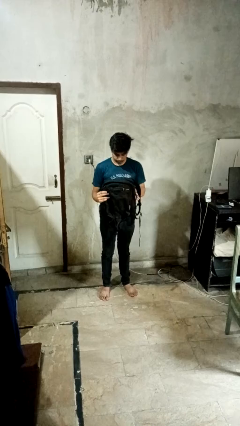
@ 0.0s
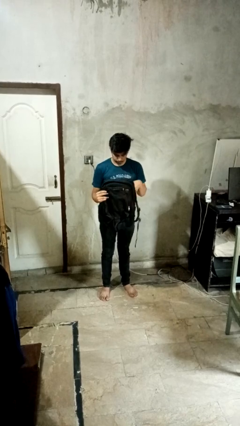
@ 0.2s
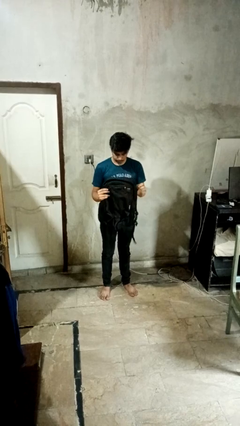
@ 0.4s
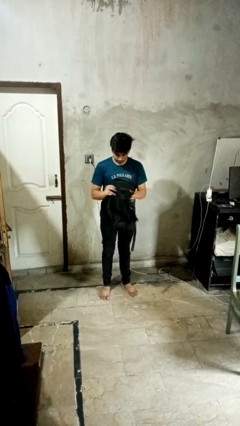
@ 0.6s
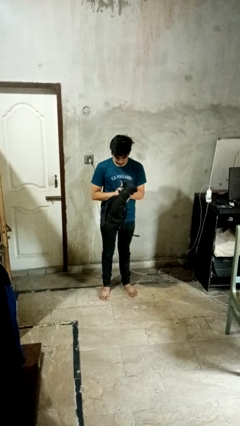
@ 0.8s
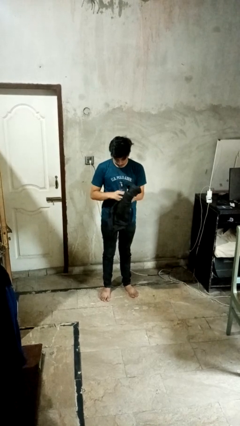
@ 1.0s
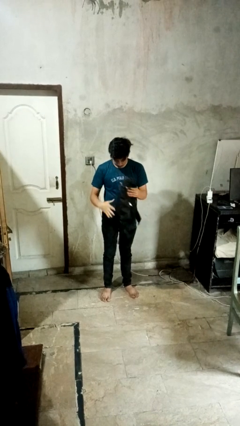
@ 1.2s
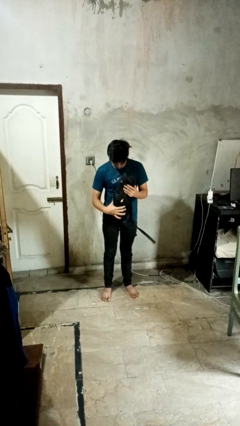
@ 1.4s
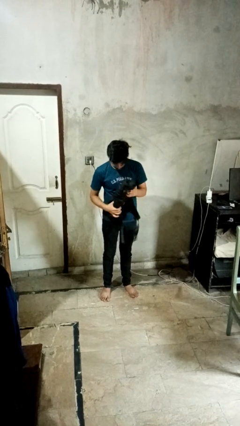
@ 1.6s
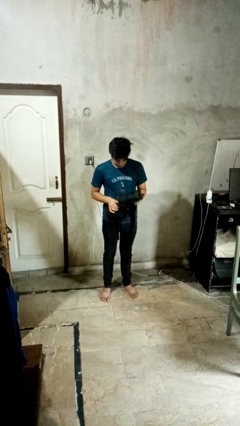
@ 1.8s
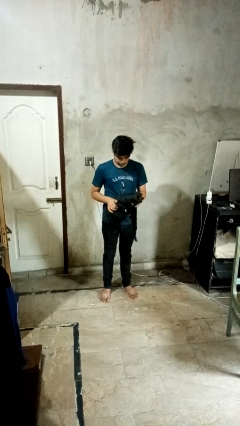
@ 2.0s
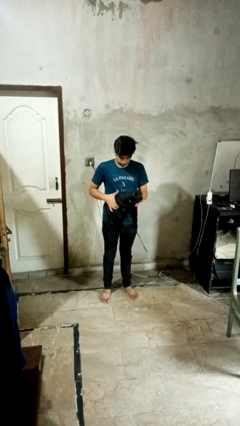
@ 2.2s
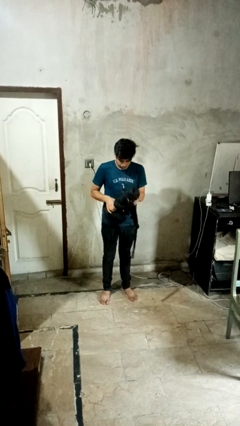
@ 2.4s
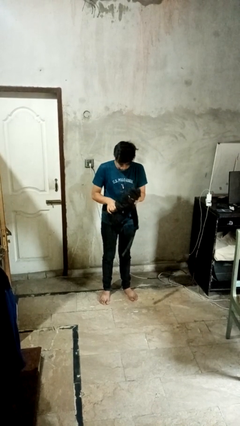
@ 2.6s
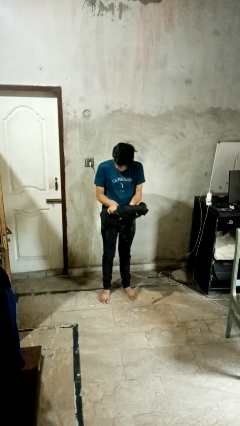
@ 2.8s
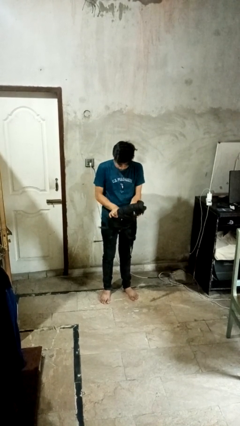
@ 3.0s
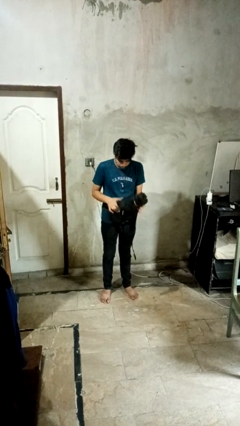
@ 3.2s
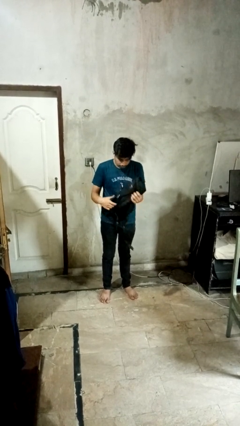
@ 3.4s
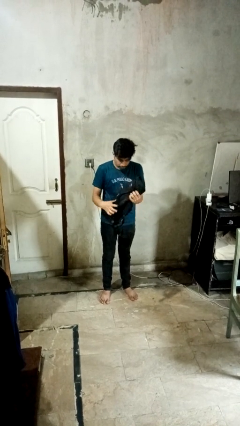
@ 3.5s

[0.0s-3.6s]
person squeezes object

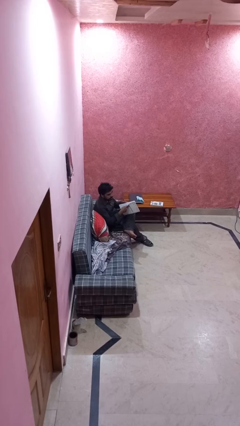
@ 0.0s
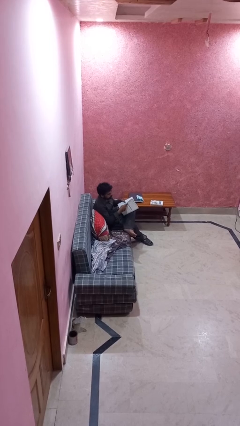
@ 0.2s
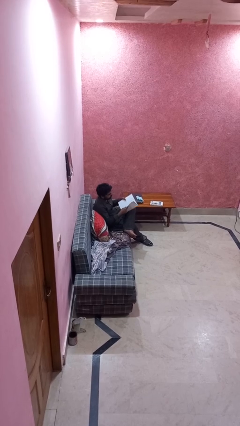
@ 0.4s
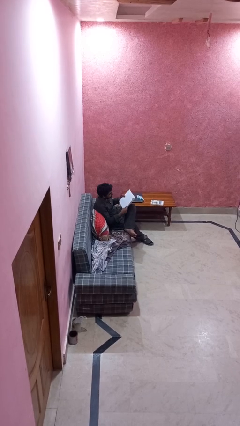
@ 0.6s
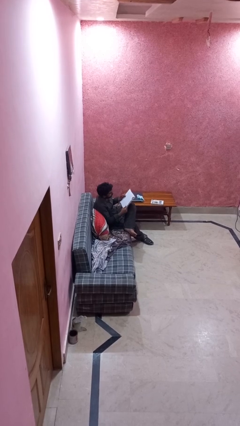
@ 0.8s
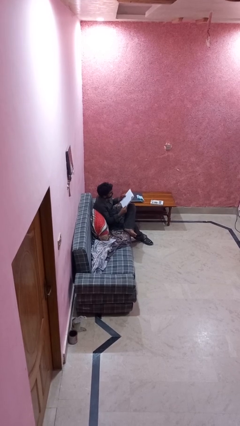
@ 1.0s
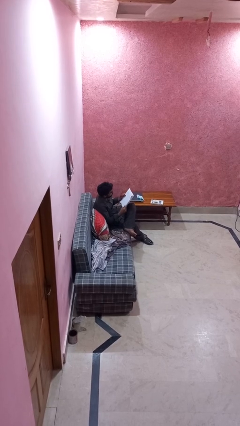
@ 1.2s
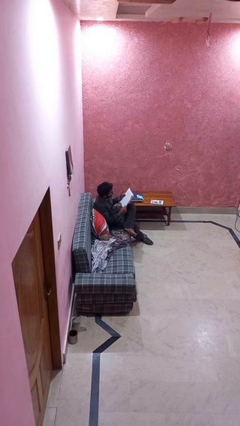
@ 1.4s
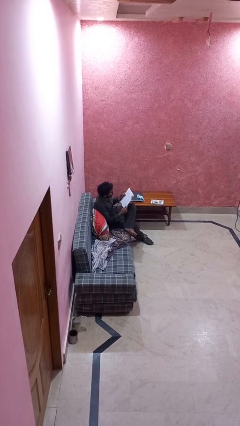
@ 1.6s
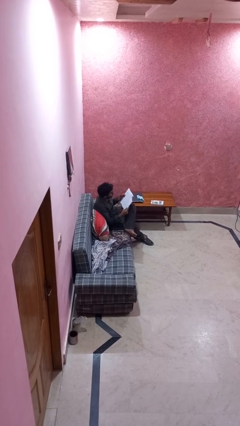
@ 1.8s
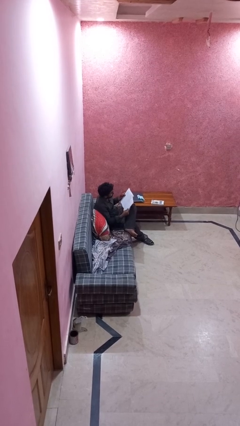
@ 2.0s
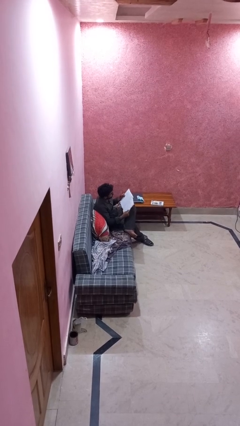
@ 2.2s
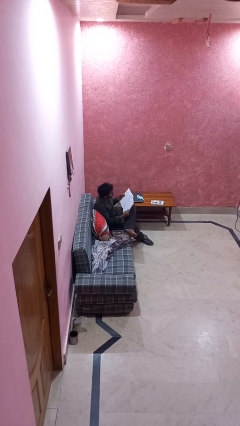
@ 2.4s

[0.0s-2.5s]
person reads magazine

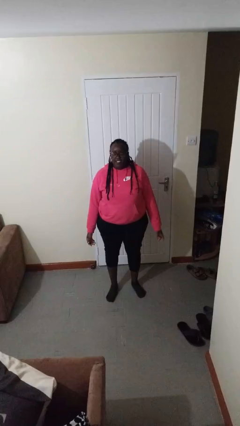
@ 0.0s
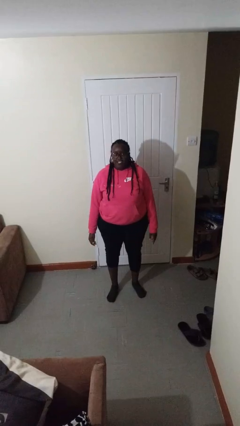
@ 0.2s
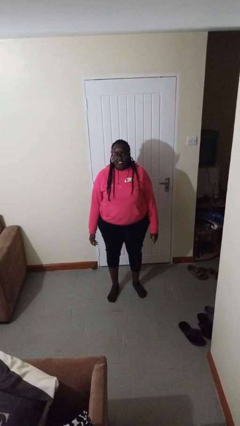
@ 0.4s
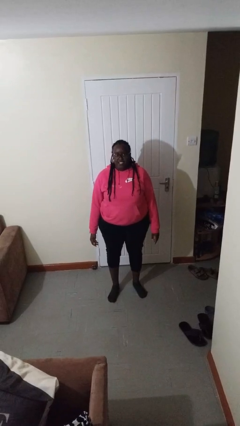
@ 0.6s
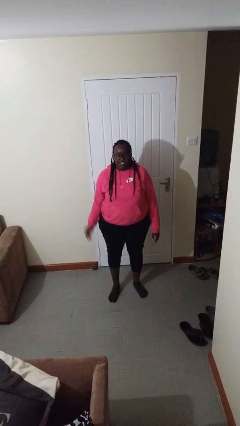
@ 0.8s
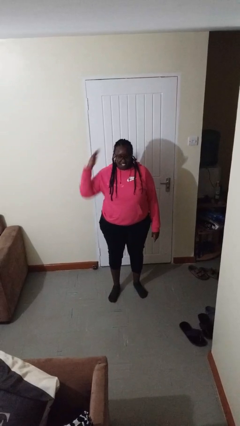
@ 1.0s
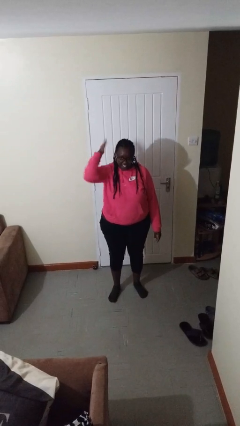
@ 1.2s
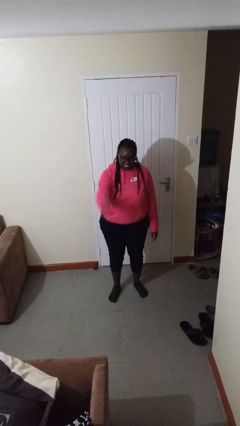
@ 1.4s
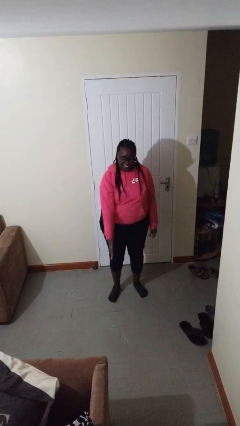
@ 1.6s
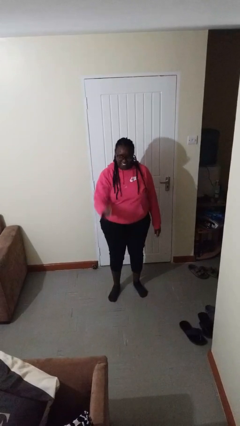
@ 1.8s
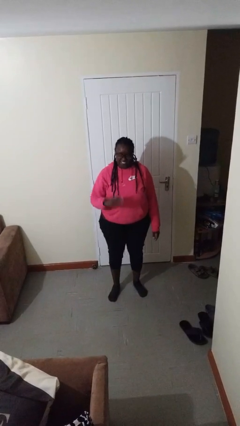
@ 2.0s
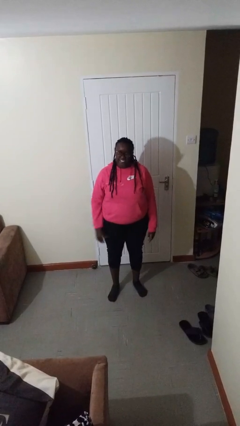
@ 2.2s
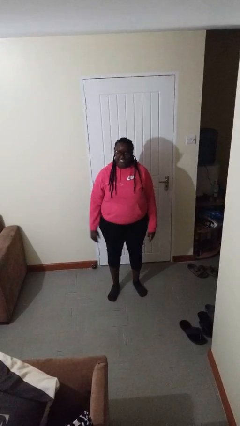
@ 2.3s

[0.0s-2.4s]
person karate chop

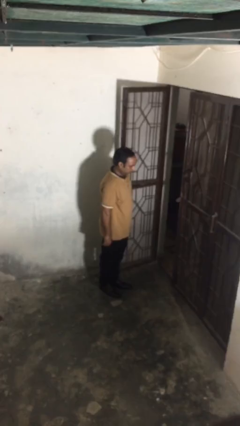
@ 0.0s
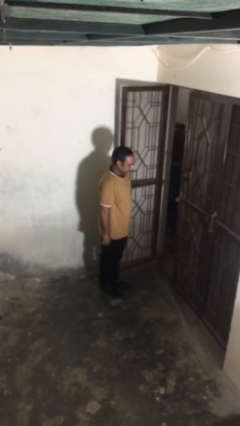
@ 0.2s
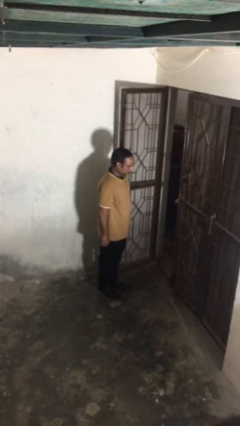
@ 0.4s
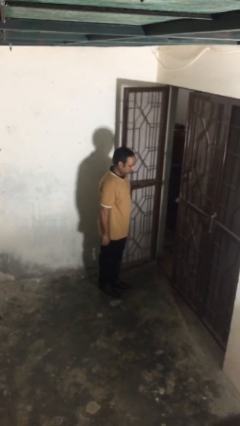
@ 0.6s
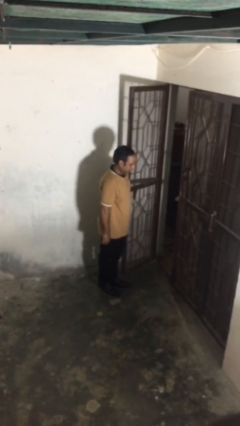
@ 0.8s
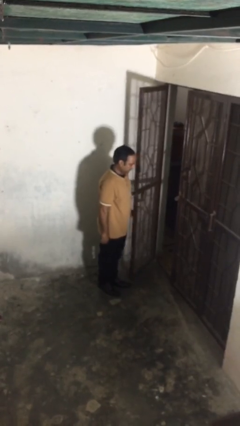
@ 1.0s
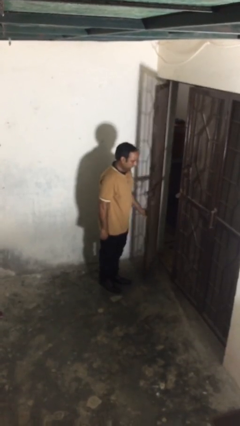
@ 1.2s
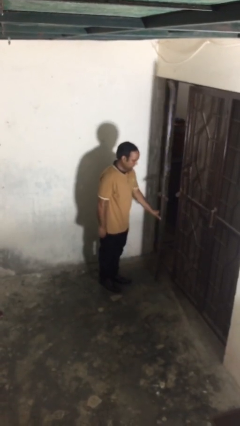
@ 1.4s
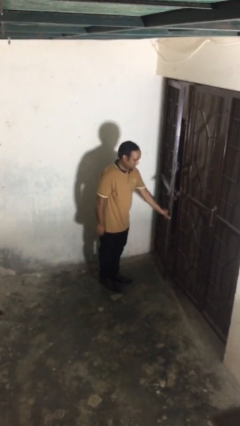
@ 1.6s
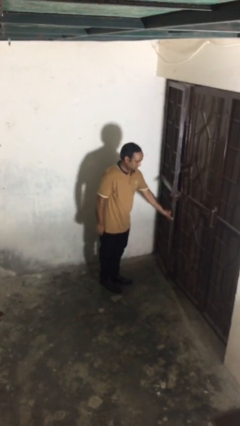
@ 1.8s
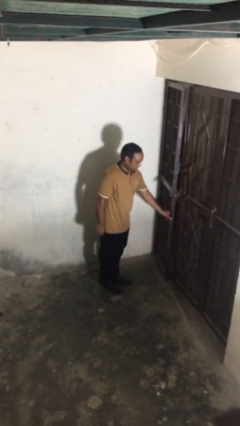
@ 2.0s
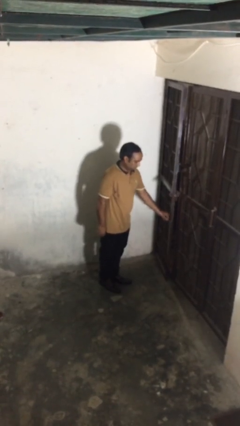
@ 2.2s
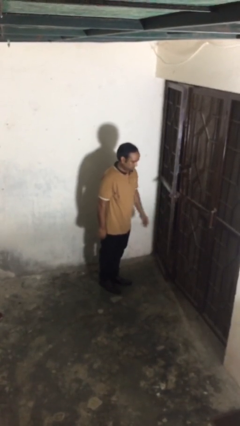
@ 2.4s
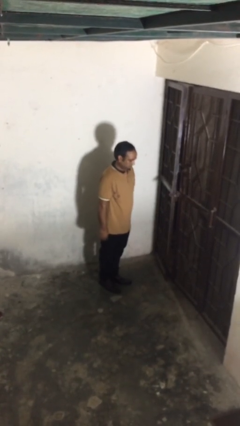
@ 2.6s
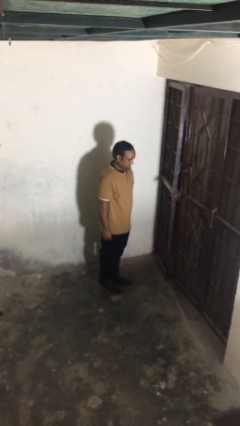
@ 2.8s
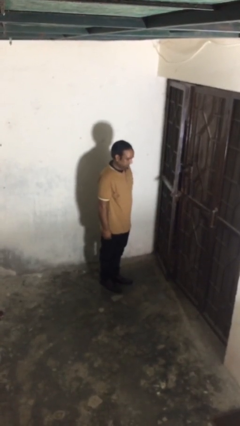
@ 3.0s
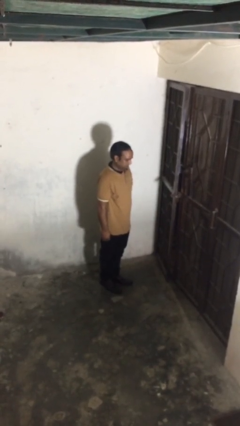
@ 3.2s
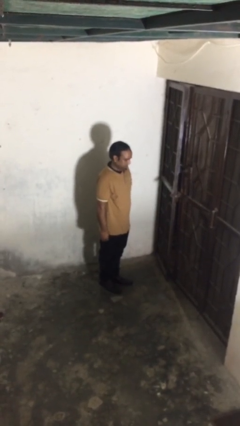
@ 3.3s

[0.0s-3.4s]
person closes facility door

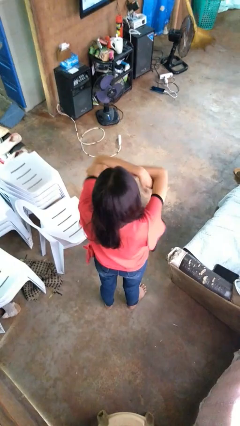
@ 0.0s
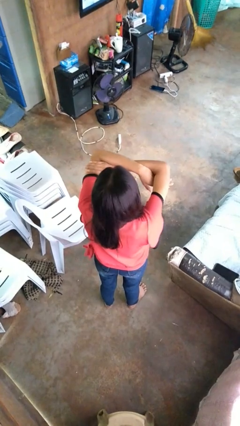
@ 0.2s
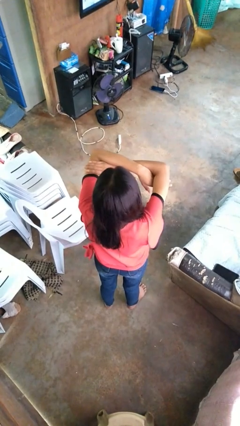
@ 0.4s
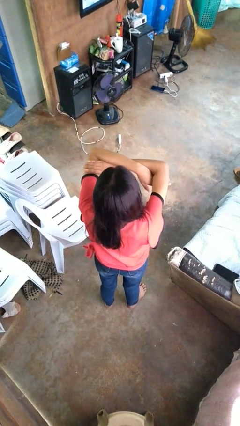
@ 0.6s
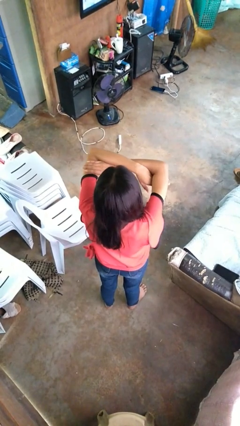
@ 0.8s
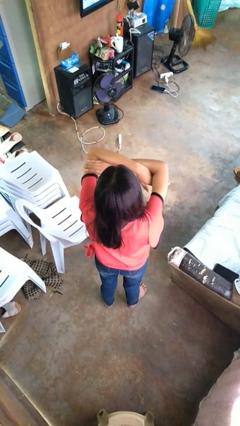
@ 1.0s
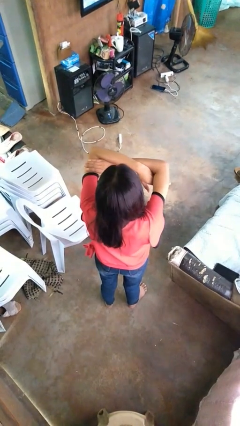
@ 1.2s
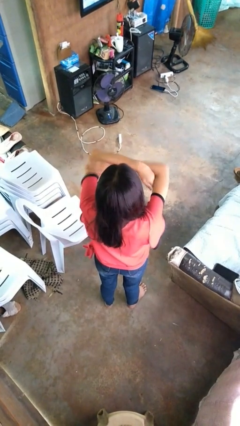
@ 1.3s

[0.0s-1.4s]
person gestures arms x

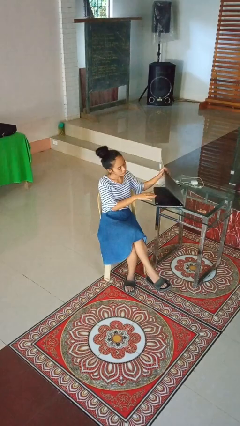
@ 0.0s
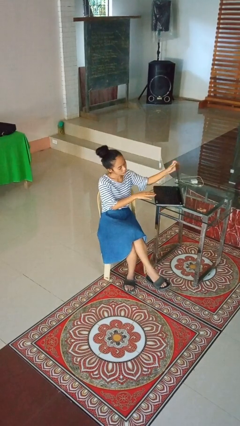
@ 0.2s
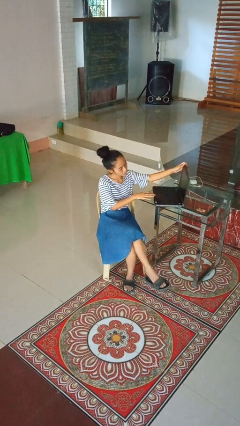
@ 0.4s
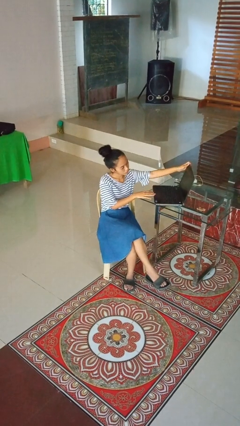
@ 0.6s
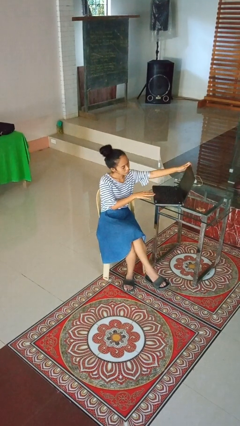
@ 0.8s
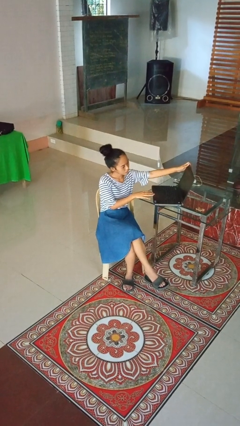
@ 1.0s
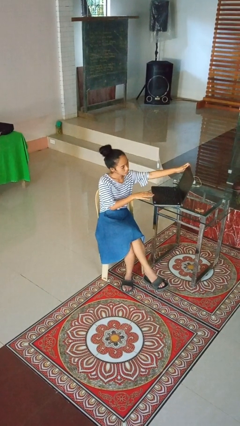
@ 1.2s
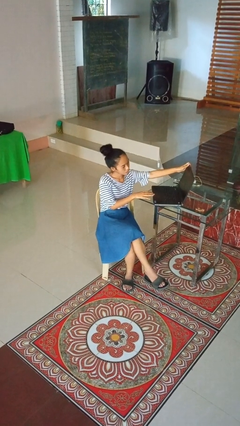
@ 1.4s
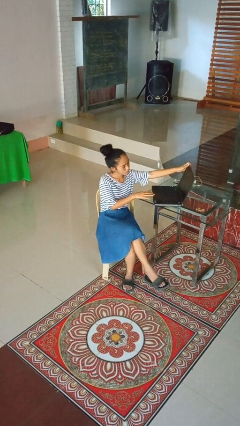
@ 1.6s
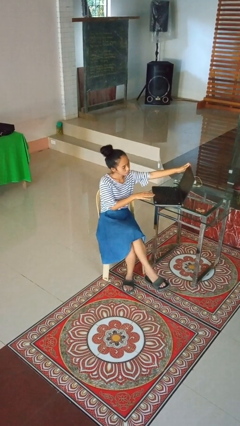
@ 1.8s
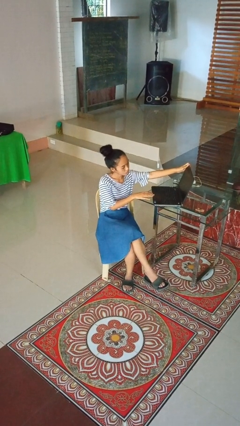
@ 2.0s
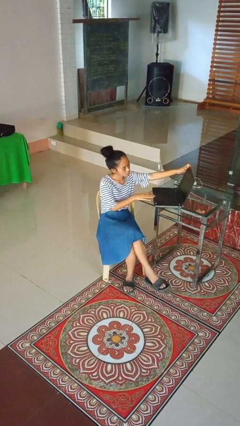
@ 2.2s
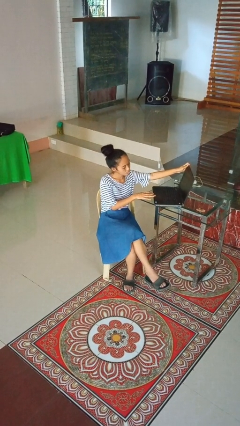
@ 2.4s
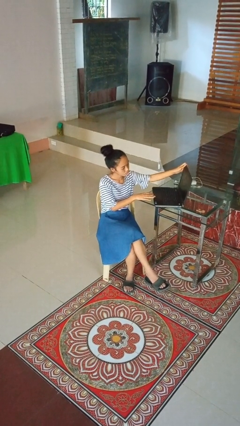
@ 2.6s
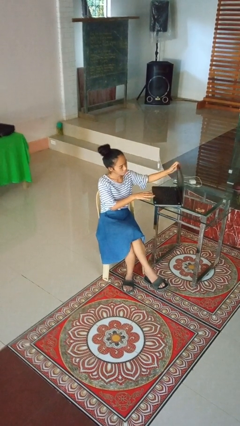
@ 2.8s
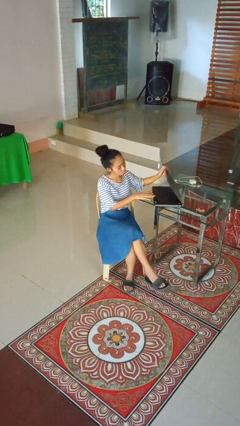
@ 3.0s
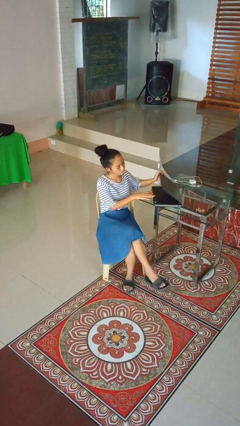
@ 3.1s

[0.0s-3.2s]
person opens laptop

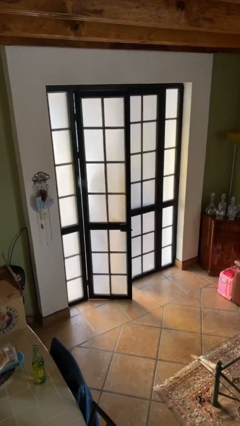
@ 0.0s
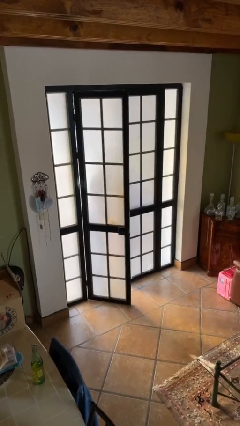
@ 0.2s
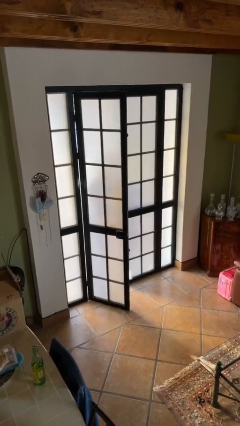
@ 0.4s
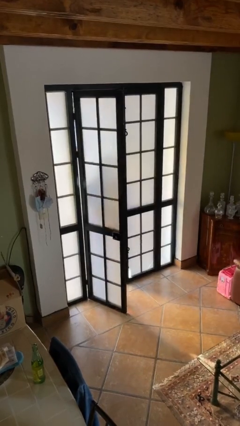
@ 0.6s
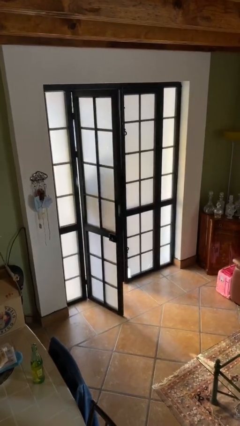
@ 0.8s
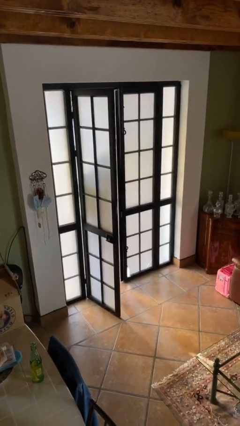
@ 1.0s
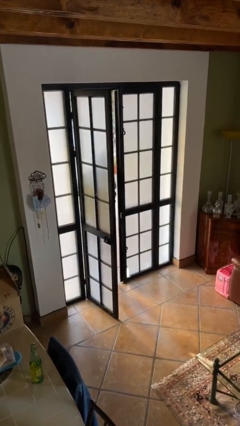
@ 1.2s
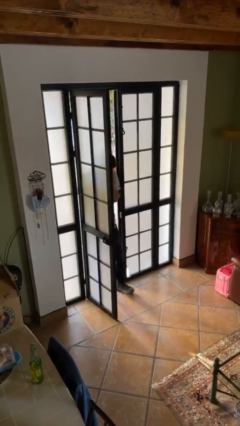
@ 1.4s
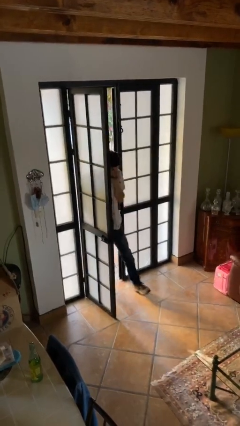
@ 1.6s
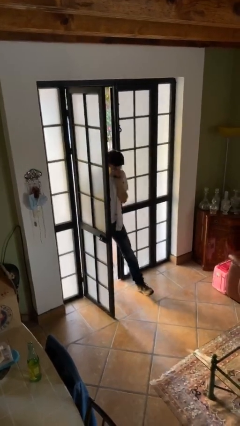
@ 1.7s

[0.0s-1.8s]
person opens facility door
